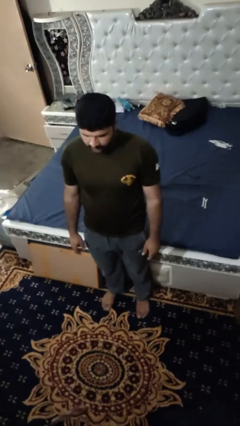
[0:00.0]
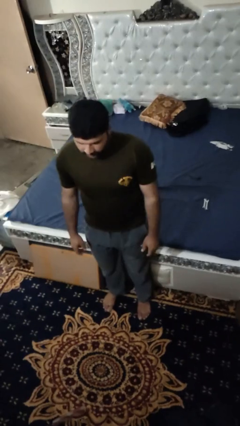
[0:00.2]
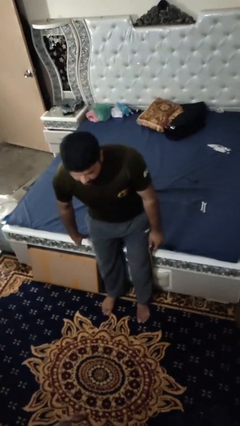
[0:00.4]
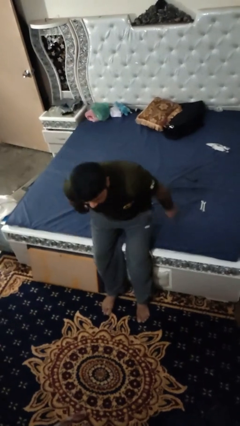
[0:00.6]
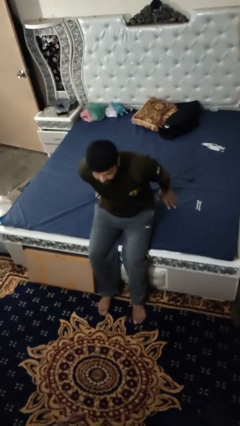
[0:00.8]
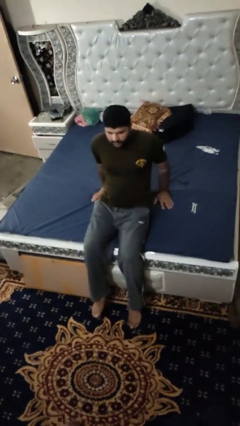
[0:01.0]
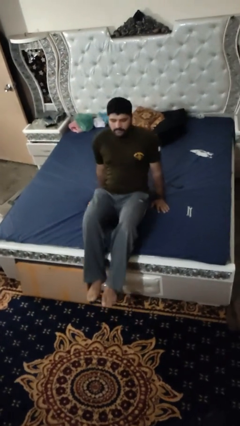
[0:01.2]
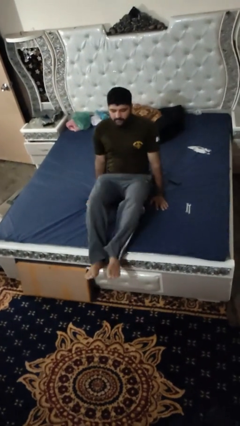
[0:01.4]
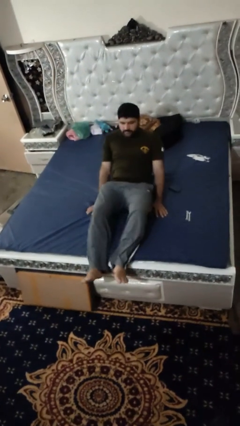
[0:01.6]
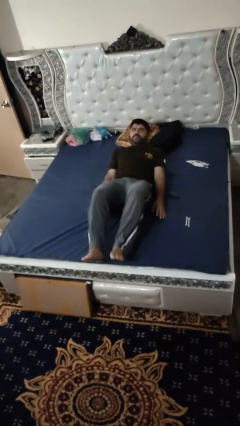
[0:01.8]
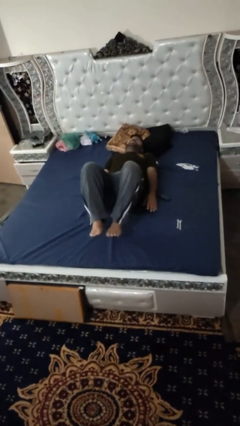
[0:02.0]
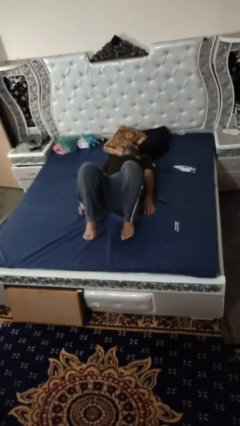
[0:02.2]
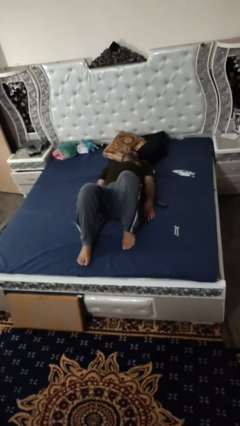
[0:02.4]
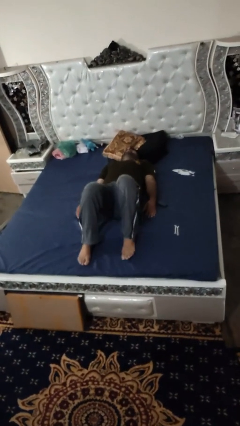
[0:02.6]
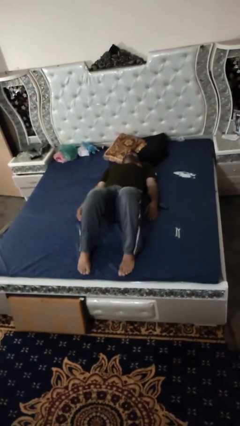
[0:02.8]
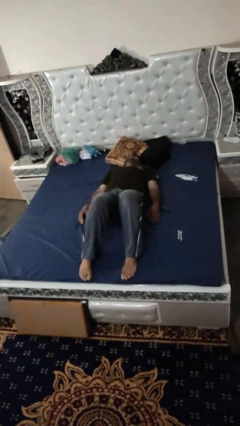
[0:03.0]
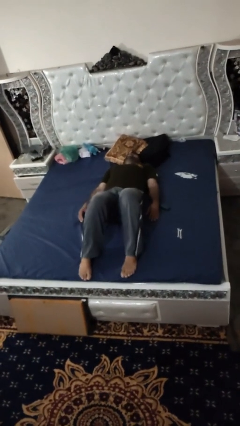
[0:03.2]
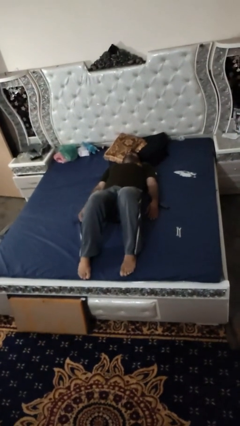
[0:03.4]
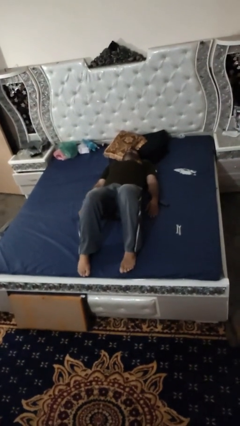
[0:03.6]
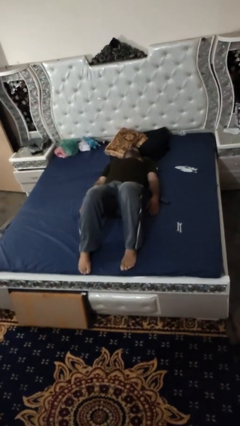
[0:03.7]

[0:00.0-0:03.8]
person lies down on bed

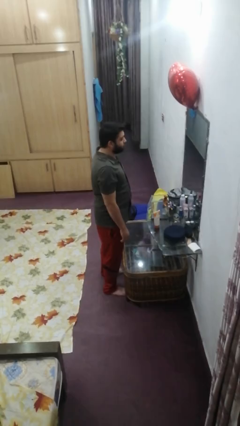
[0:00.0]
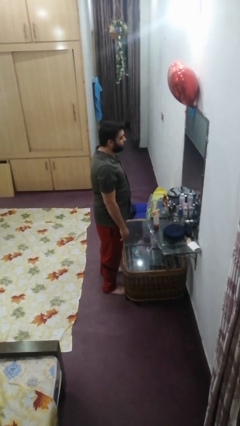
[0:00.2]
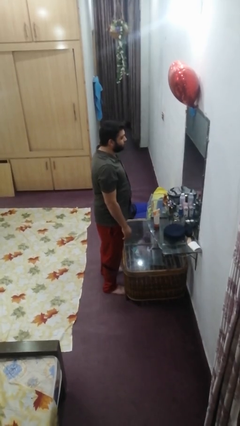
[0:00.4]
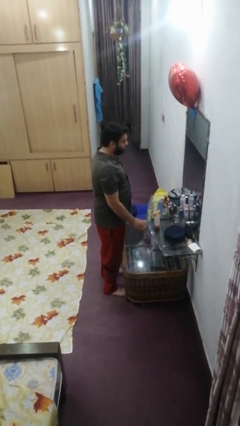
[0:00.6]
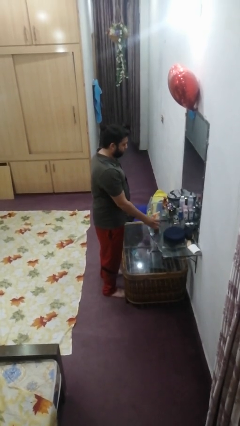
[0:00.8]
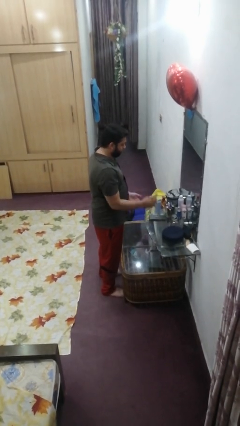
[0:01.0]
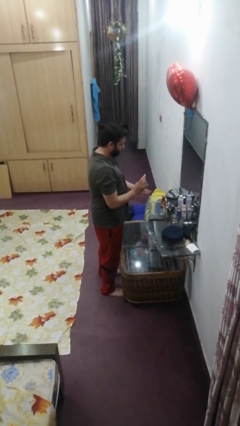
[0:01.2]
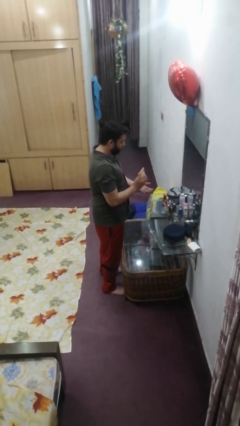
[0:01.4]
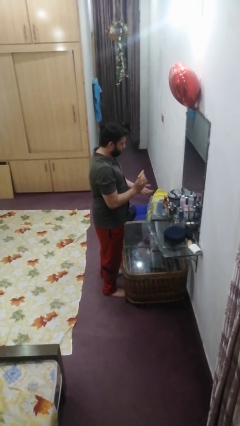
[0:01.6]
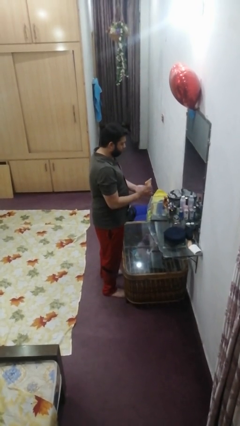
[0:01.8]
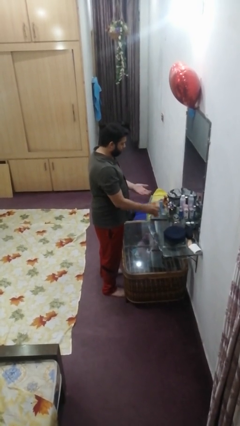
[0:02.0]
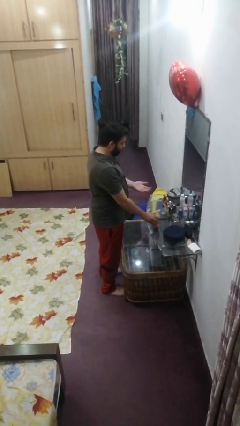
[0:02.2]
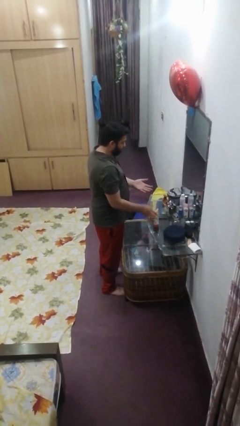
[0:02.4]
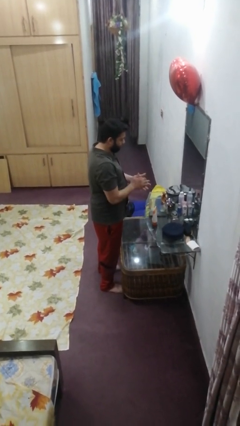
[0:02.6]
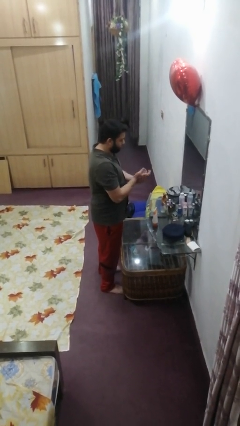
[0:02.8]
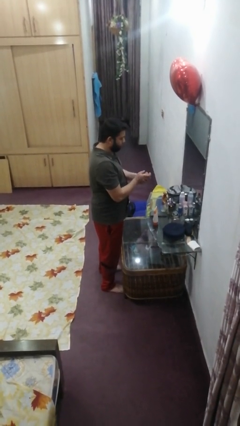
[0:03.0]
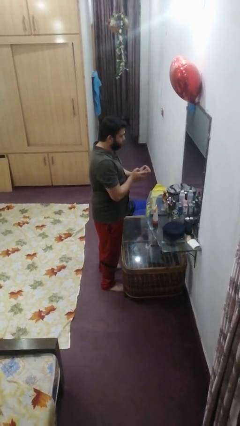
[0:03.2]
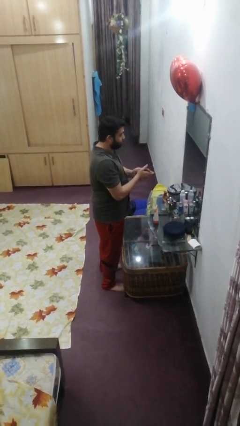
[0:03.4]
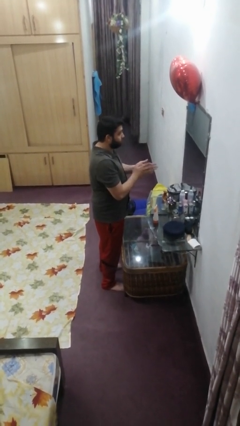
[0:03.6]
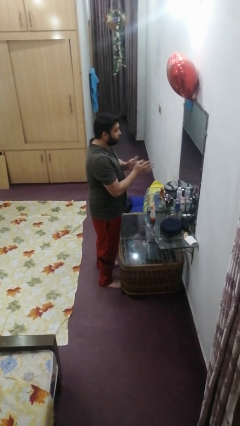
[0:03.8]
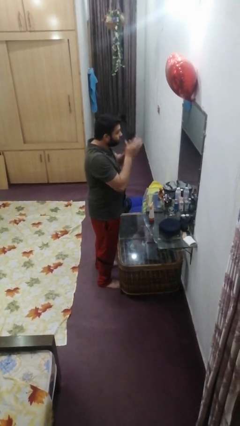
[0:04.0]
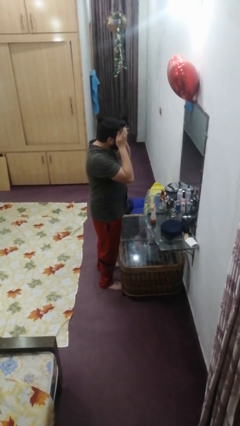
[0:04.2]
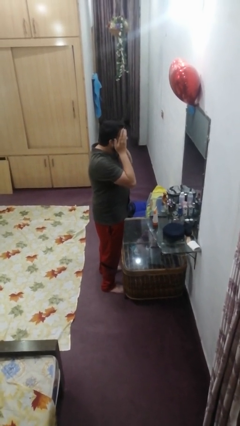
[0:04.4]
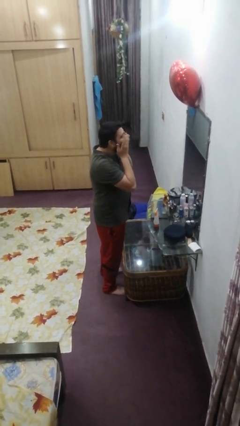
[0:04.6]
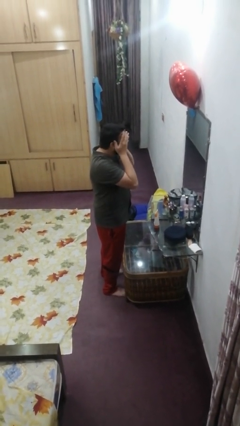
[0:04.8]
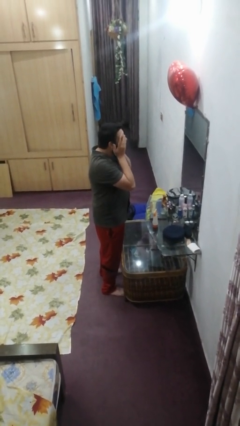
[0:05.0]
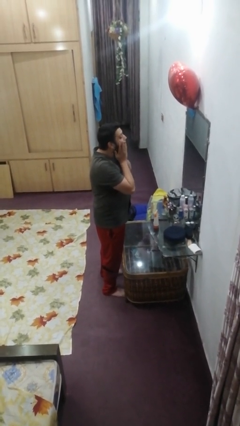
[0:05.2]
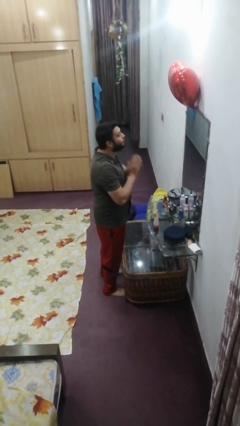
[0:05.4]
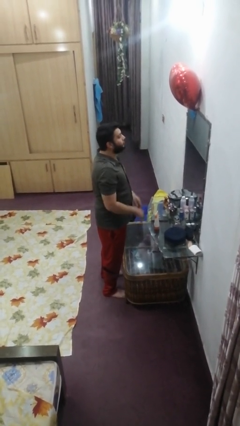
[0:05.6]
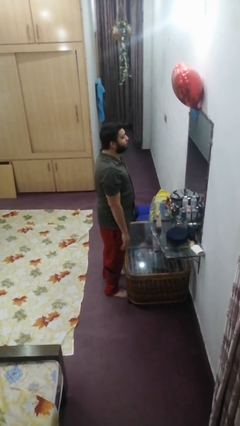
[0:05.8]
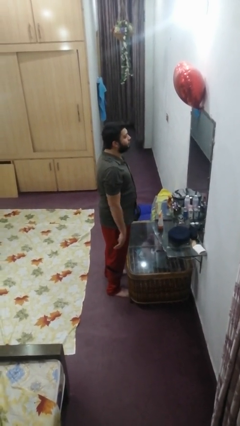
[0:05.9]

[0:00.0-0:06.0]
person applies facial moisturizer

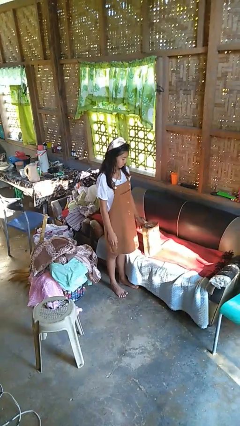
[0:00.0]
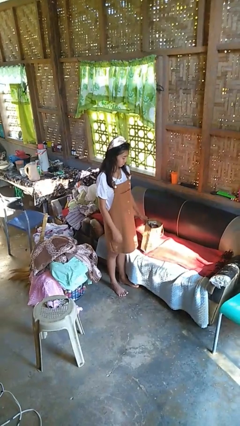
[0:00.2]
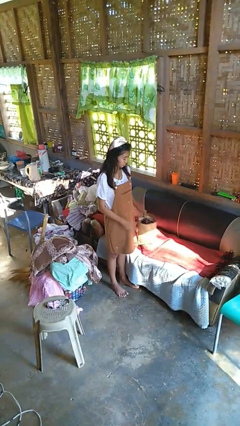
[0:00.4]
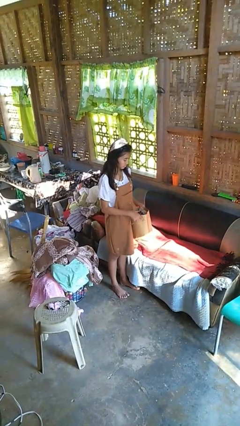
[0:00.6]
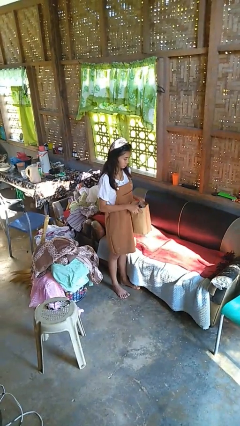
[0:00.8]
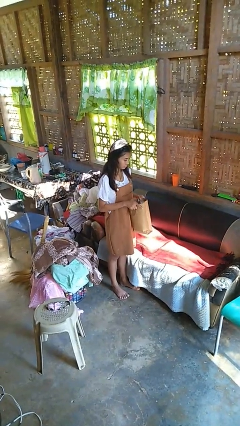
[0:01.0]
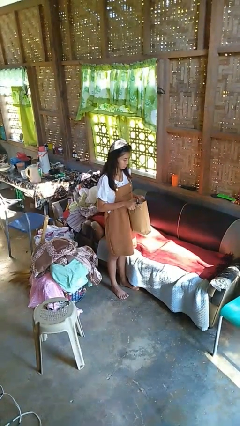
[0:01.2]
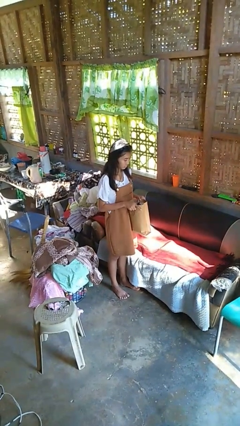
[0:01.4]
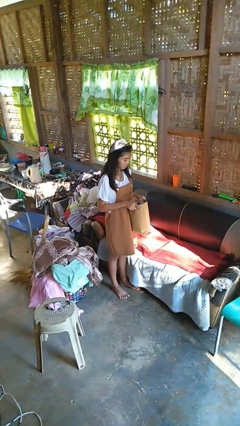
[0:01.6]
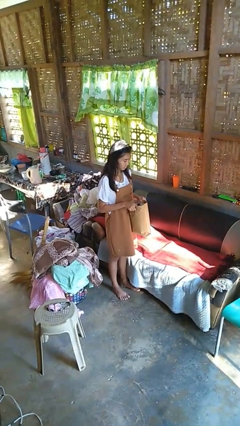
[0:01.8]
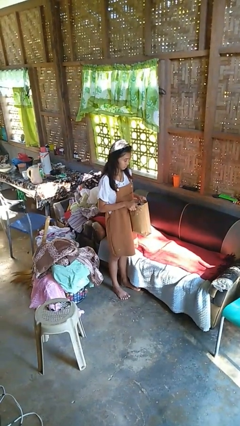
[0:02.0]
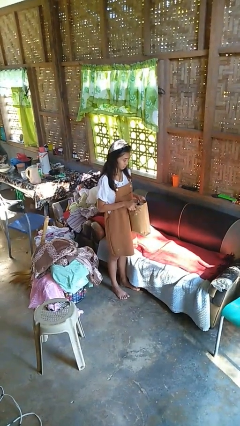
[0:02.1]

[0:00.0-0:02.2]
person picks up object from couch

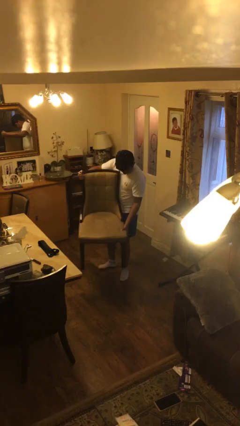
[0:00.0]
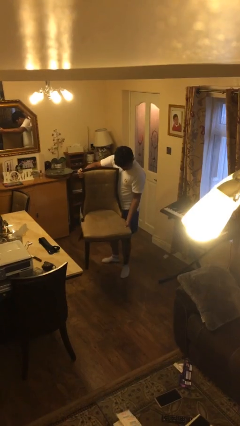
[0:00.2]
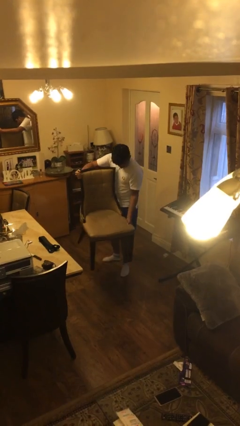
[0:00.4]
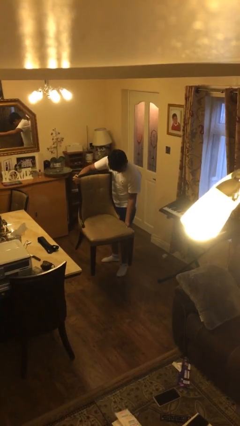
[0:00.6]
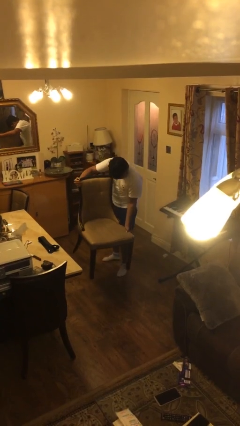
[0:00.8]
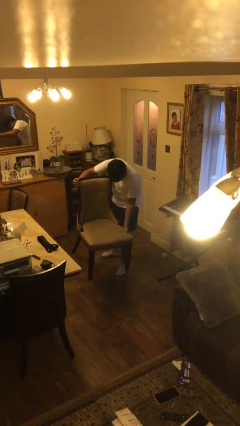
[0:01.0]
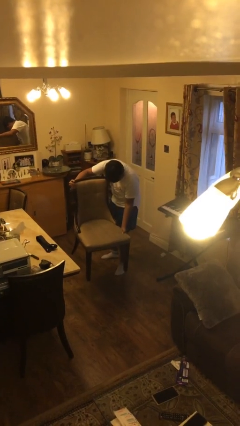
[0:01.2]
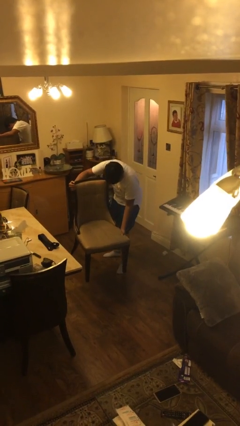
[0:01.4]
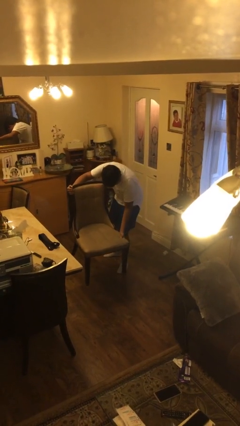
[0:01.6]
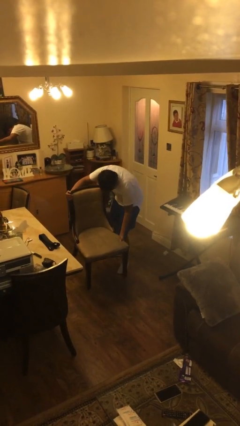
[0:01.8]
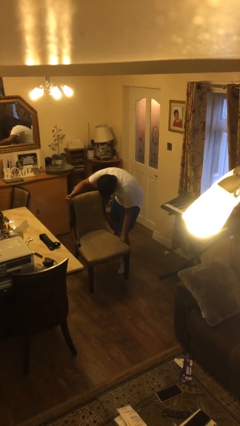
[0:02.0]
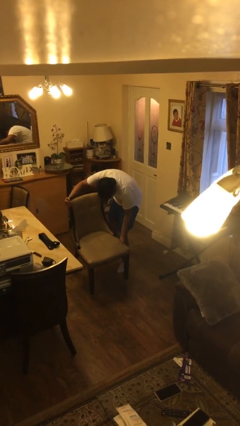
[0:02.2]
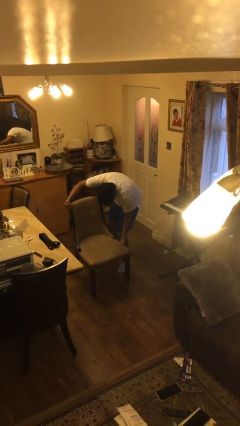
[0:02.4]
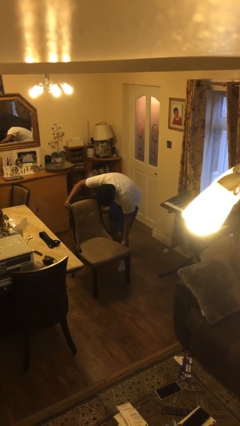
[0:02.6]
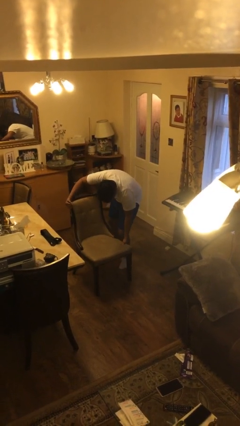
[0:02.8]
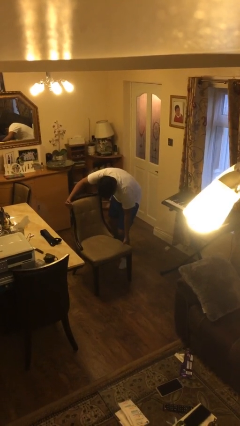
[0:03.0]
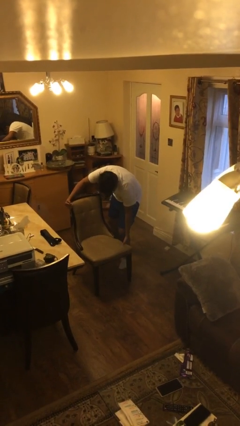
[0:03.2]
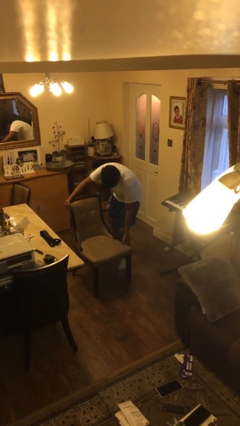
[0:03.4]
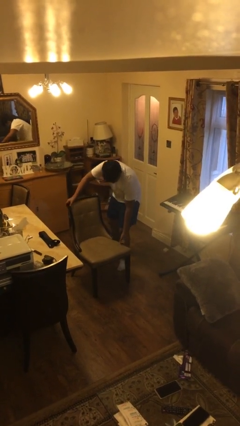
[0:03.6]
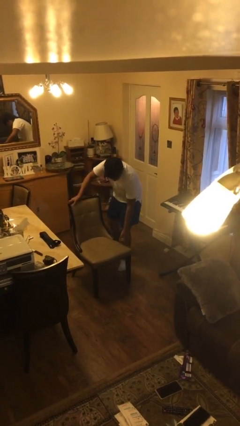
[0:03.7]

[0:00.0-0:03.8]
person puts down object on floor

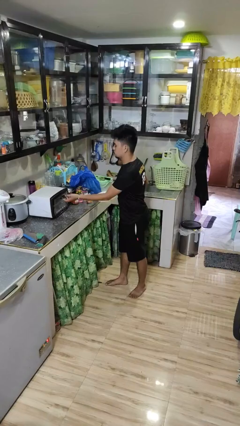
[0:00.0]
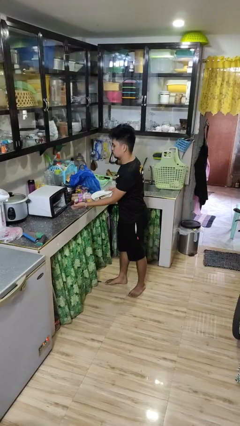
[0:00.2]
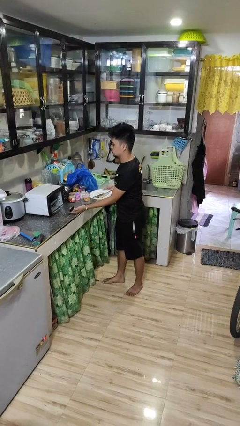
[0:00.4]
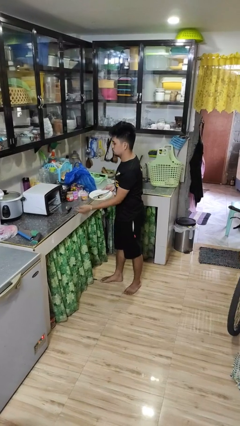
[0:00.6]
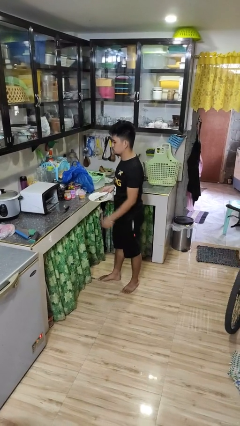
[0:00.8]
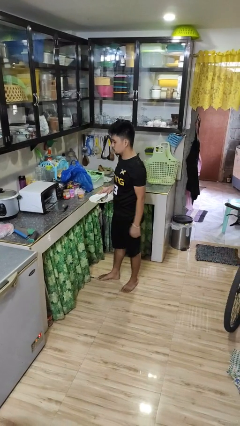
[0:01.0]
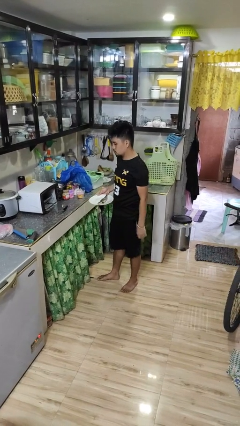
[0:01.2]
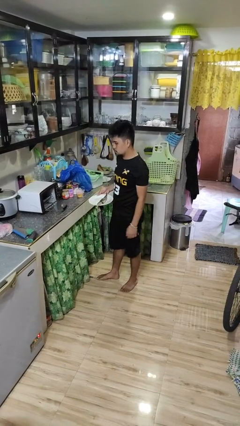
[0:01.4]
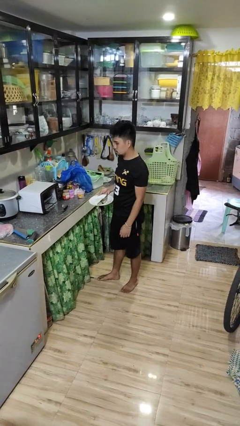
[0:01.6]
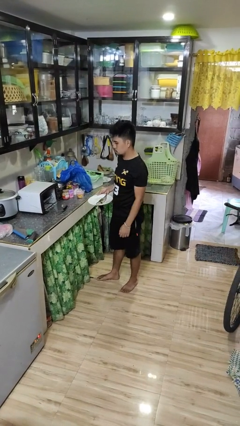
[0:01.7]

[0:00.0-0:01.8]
person opens microwave
